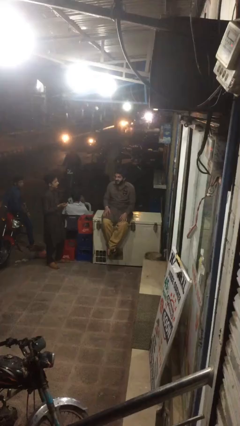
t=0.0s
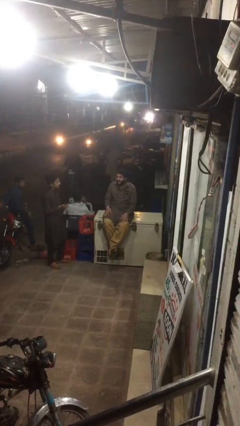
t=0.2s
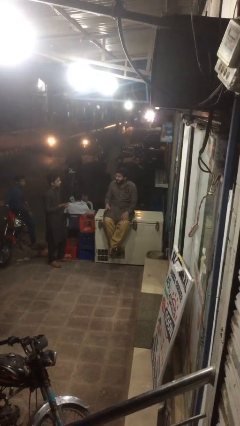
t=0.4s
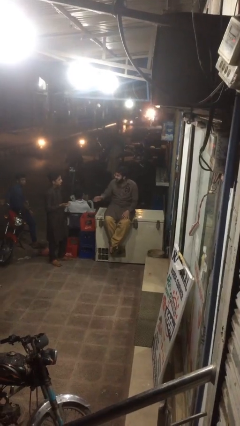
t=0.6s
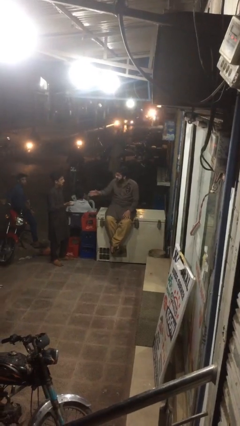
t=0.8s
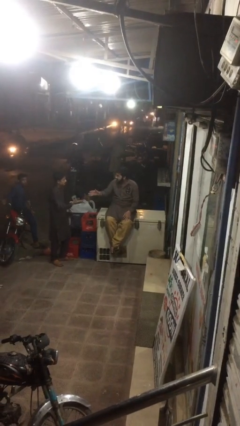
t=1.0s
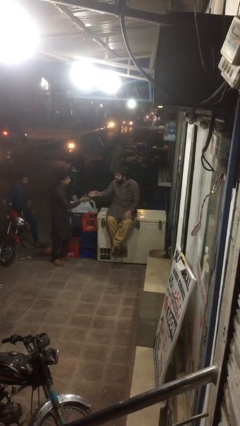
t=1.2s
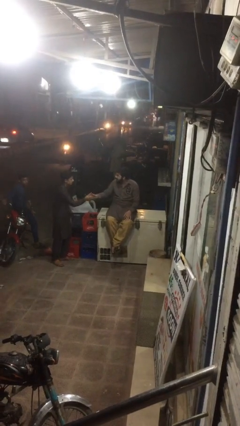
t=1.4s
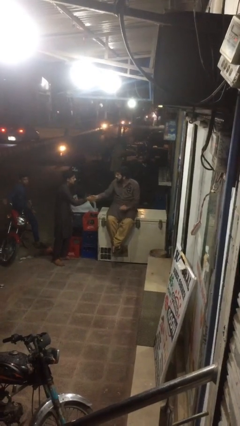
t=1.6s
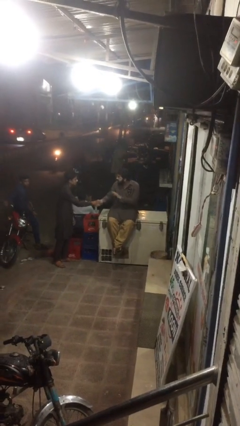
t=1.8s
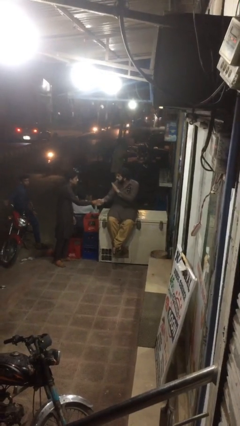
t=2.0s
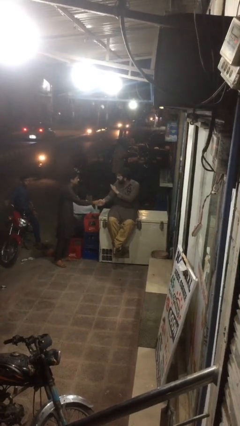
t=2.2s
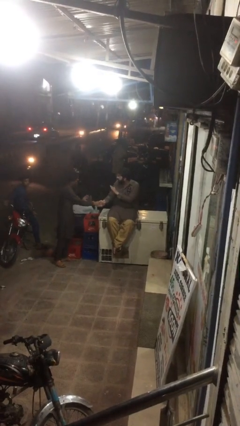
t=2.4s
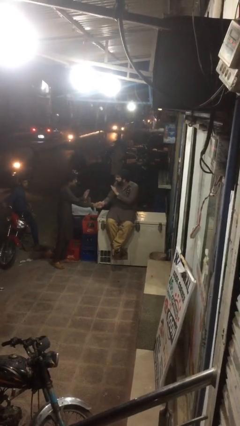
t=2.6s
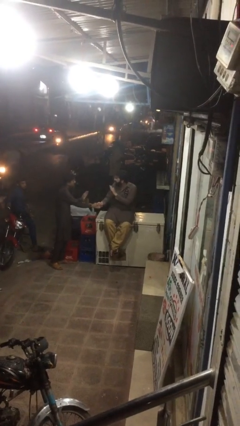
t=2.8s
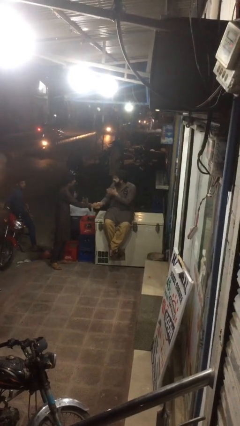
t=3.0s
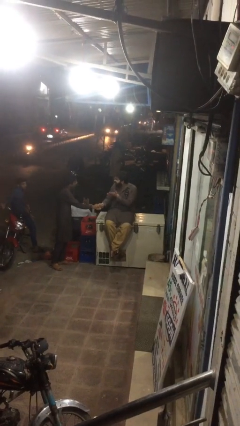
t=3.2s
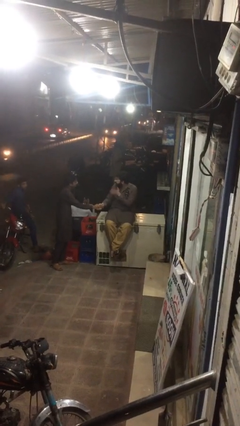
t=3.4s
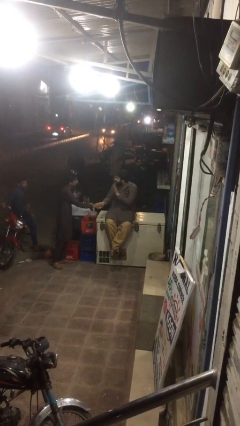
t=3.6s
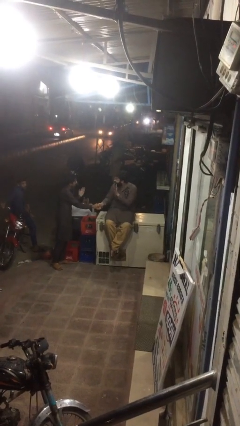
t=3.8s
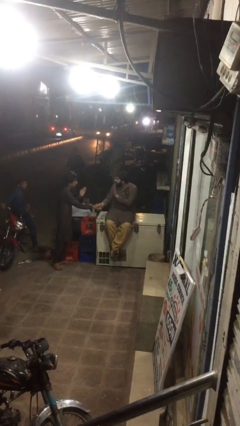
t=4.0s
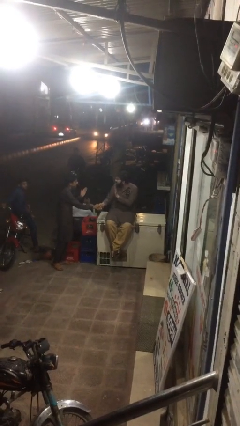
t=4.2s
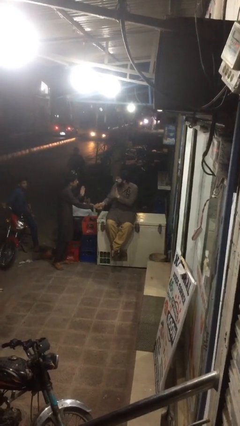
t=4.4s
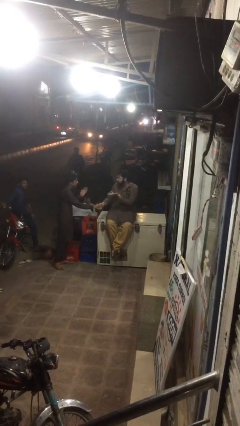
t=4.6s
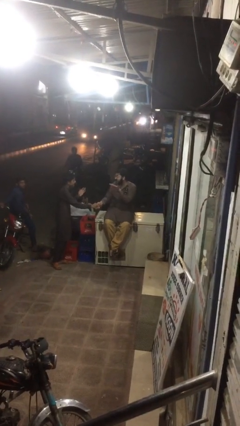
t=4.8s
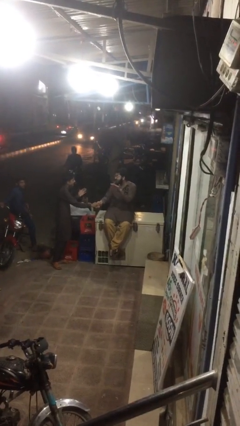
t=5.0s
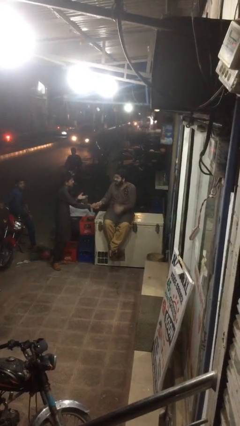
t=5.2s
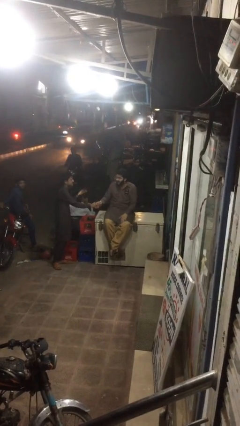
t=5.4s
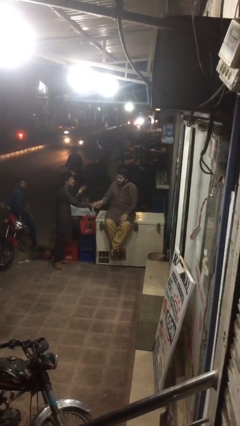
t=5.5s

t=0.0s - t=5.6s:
person shakes hand

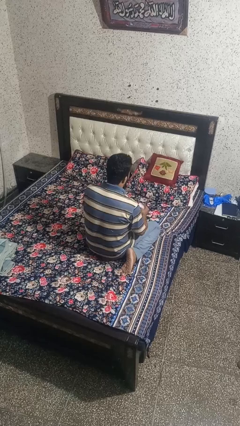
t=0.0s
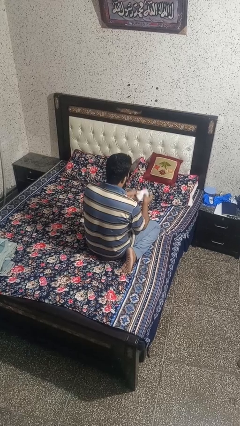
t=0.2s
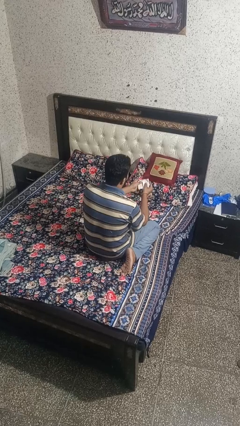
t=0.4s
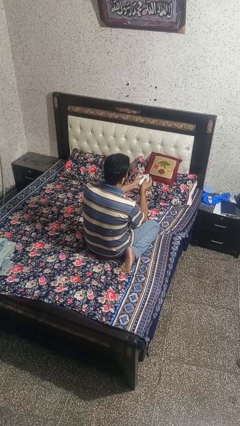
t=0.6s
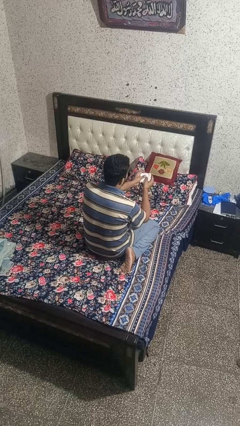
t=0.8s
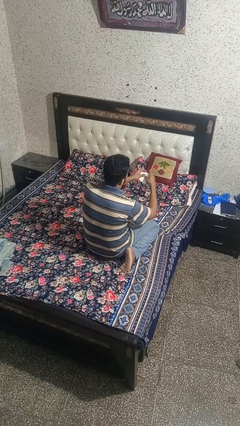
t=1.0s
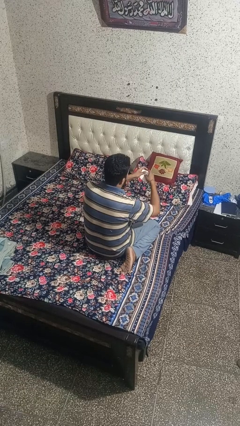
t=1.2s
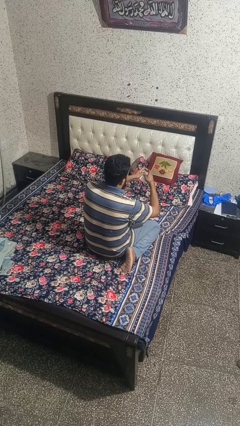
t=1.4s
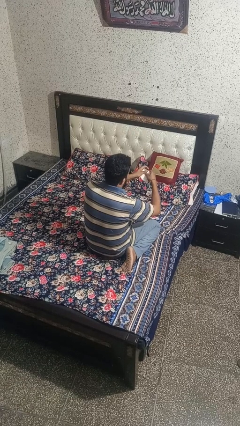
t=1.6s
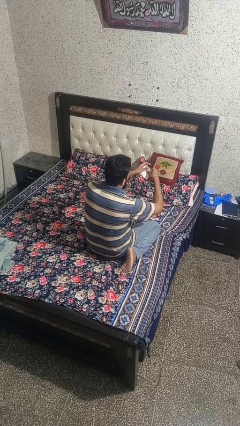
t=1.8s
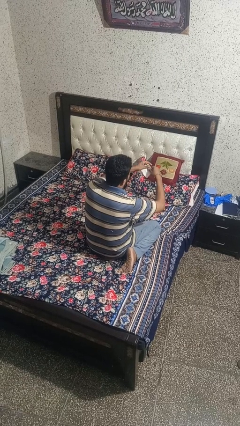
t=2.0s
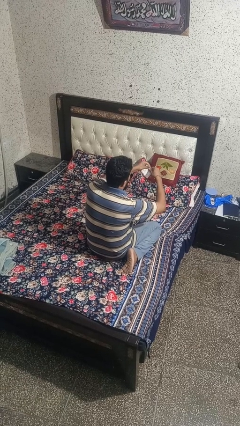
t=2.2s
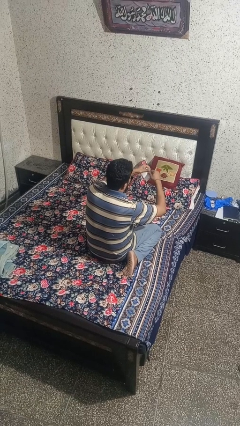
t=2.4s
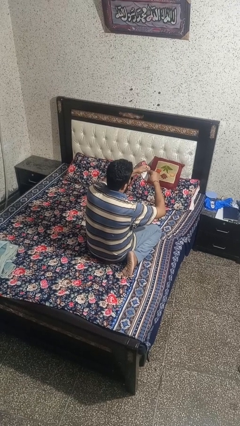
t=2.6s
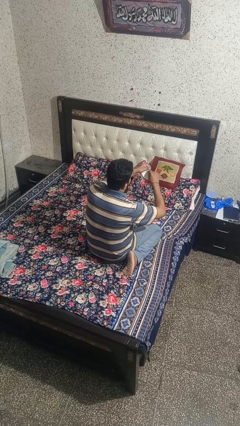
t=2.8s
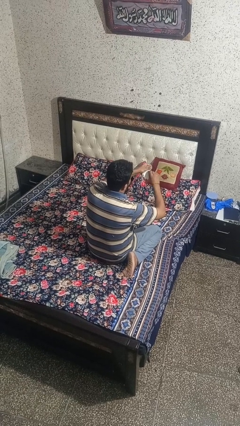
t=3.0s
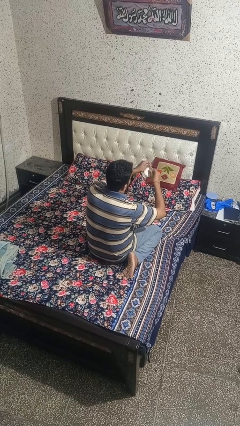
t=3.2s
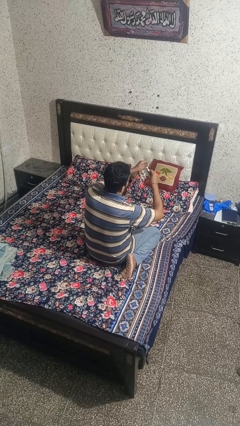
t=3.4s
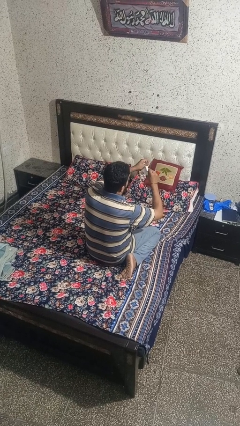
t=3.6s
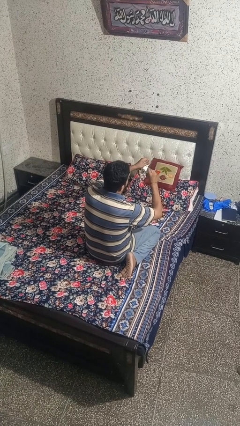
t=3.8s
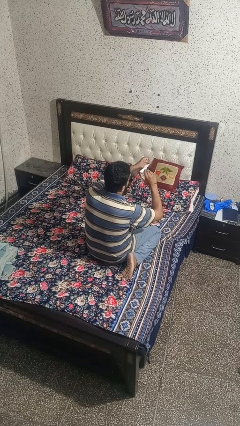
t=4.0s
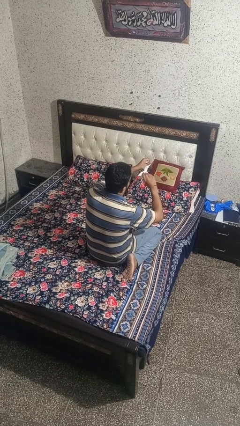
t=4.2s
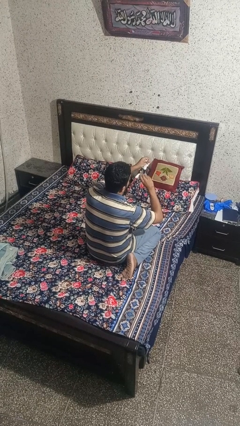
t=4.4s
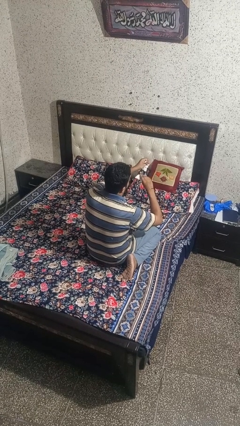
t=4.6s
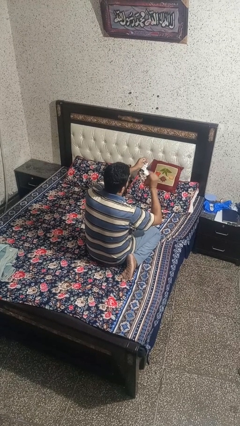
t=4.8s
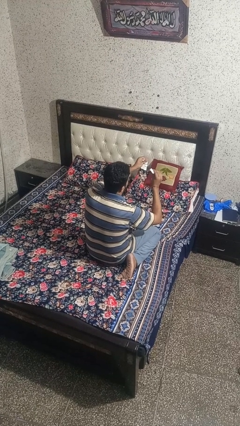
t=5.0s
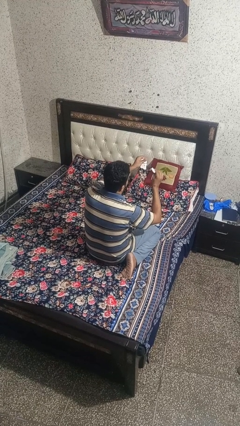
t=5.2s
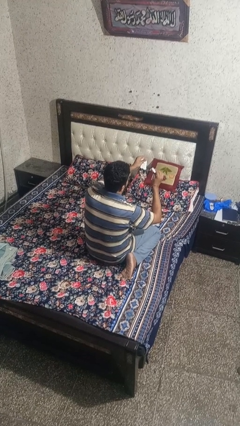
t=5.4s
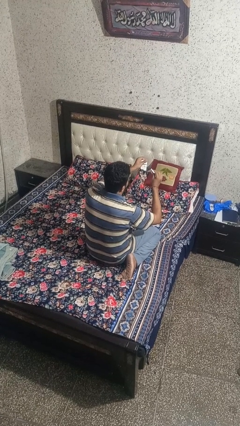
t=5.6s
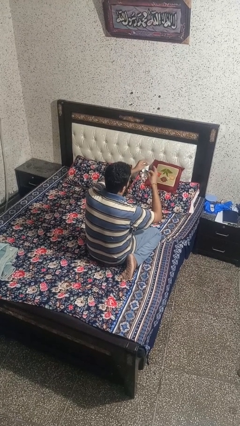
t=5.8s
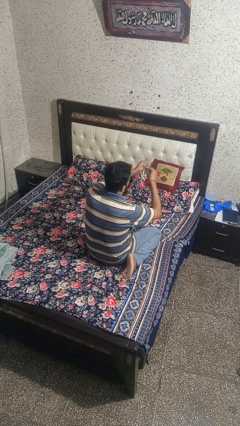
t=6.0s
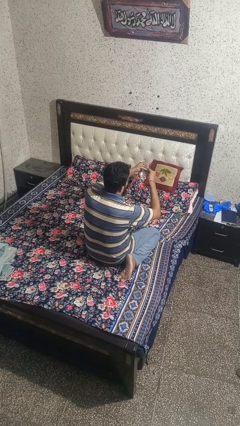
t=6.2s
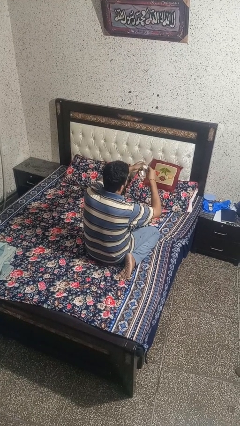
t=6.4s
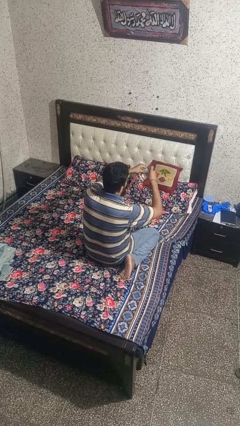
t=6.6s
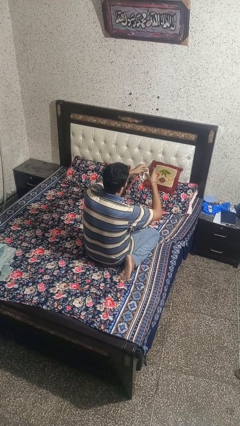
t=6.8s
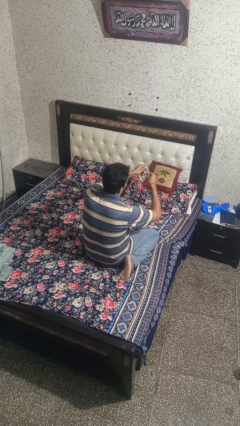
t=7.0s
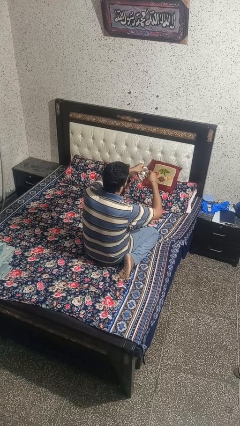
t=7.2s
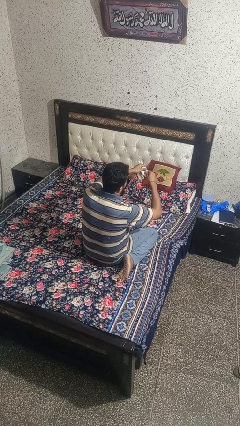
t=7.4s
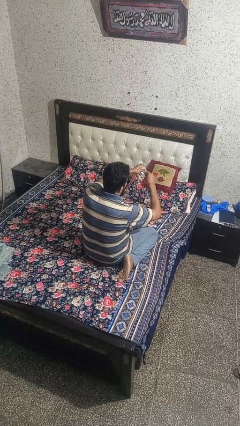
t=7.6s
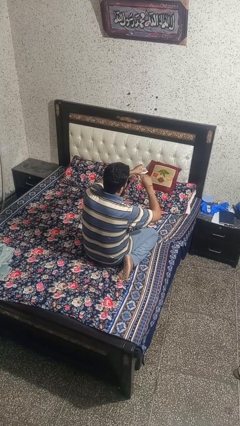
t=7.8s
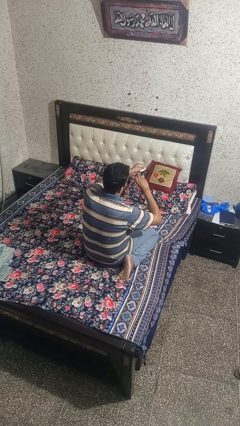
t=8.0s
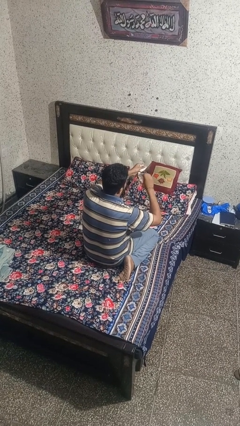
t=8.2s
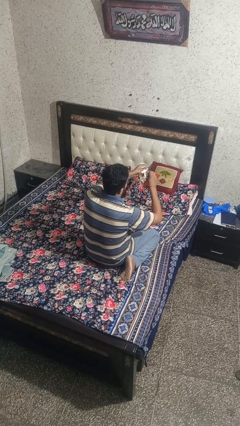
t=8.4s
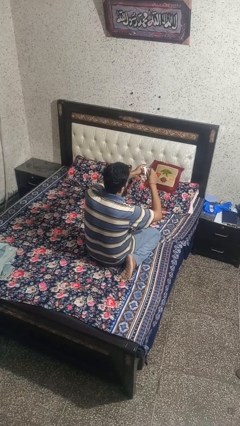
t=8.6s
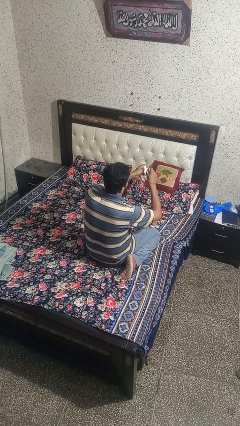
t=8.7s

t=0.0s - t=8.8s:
person tears paper

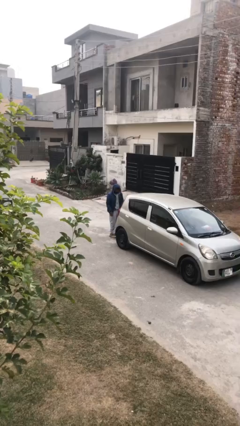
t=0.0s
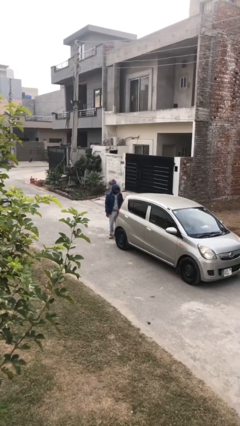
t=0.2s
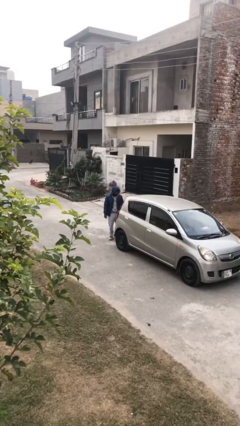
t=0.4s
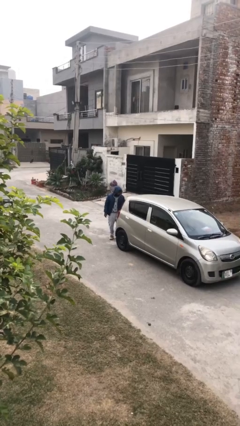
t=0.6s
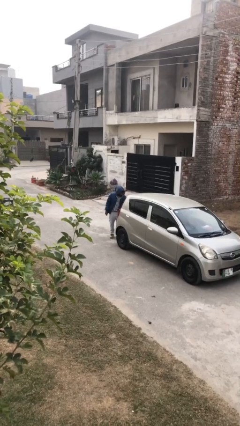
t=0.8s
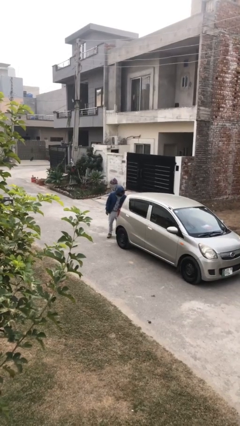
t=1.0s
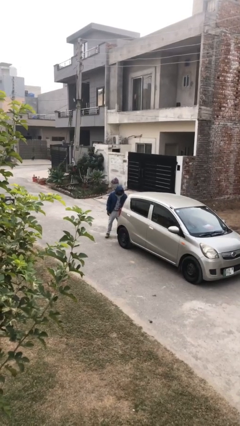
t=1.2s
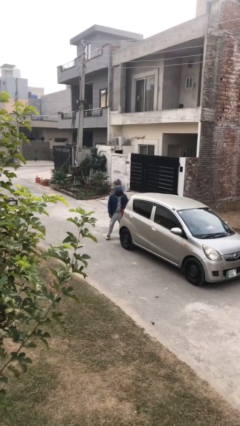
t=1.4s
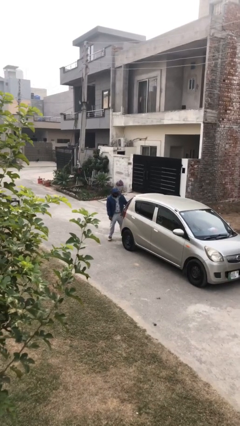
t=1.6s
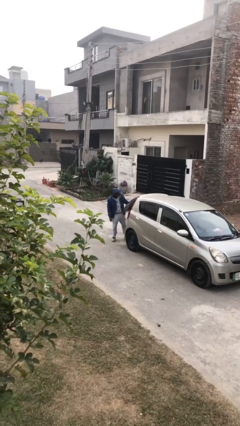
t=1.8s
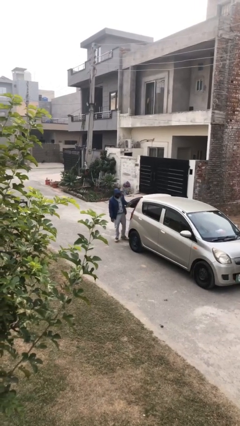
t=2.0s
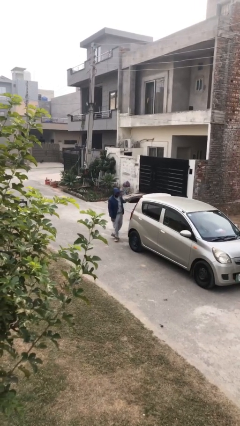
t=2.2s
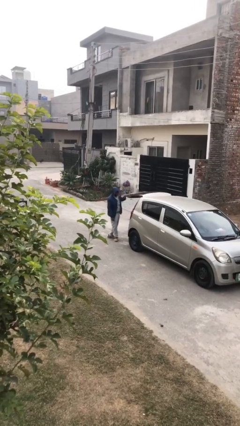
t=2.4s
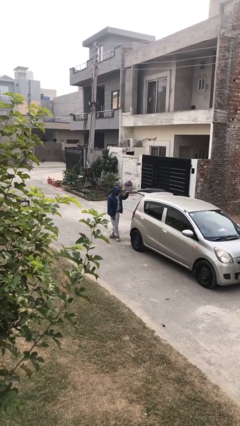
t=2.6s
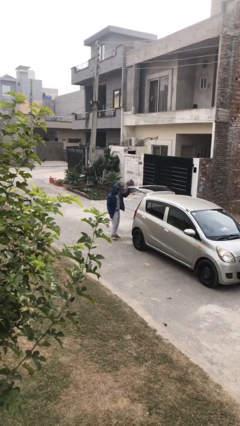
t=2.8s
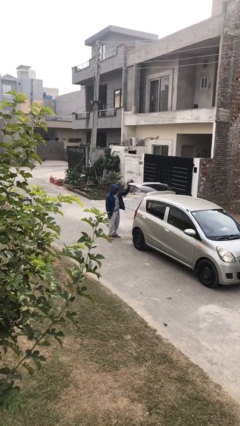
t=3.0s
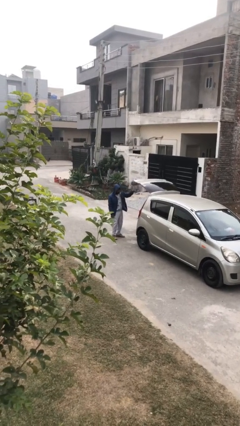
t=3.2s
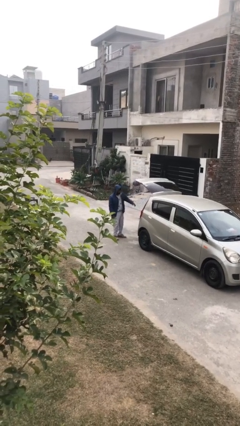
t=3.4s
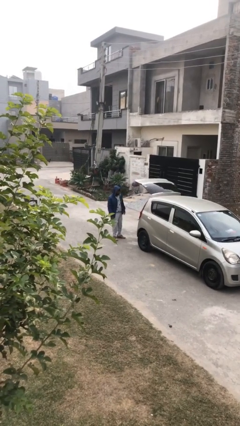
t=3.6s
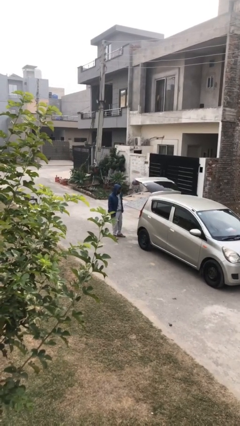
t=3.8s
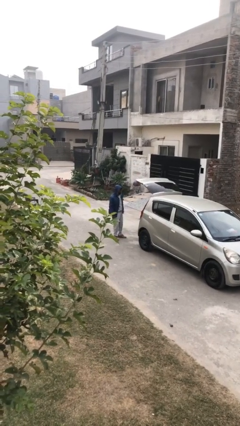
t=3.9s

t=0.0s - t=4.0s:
person opens car trunk
